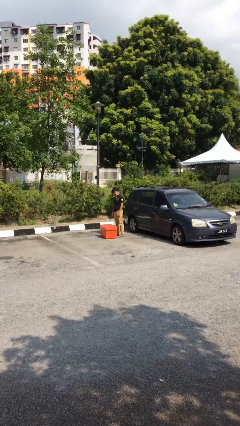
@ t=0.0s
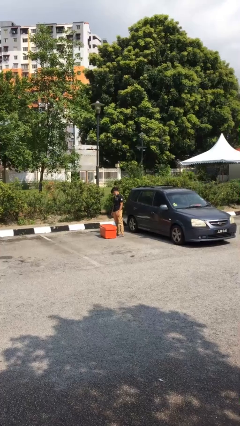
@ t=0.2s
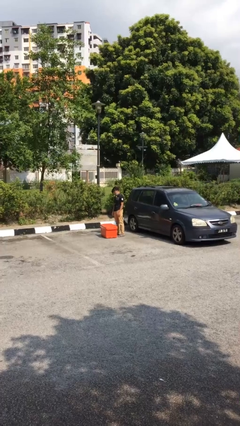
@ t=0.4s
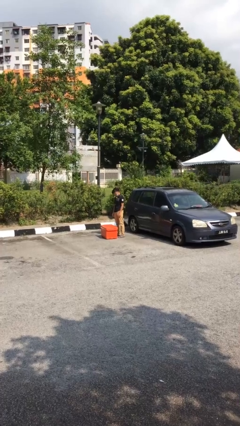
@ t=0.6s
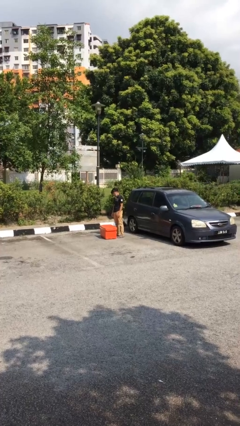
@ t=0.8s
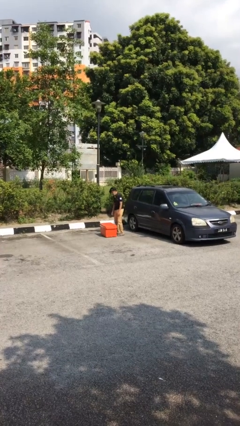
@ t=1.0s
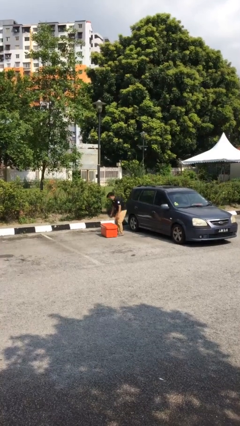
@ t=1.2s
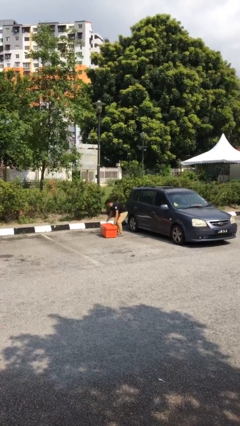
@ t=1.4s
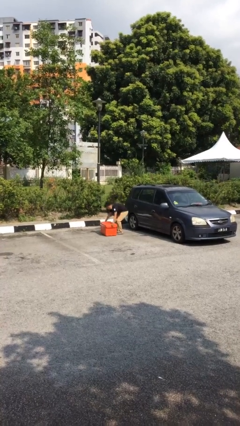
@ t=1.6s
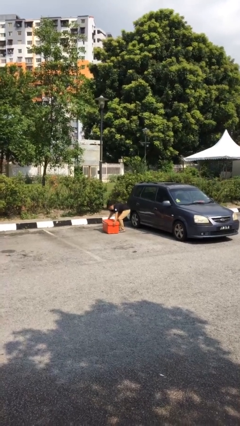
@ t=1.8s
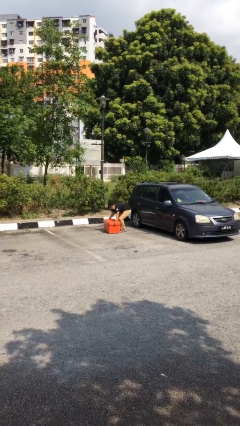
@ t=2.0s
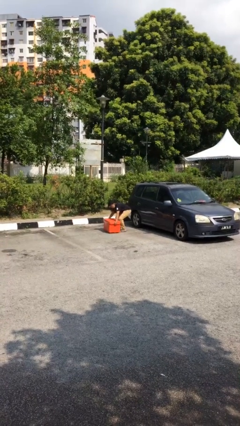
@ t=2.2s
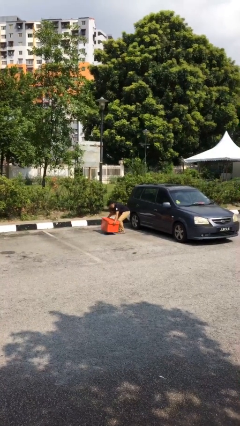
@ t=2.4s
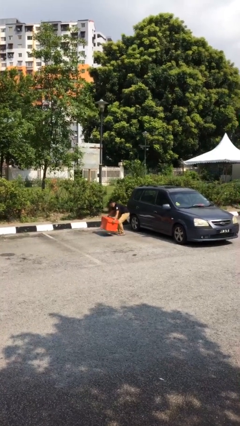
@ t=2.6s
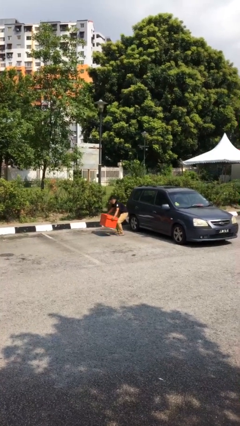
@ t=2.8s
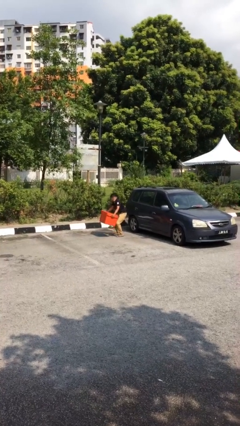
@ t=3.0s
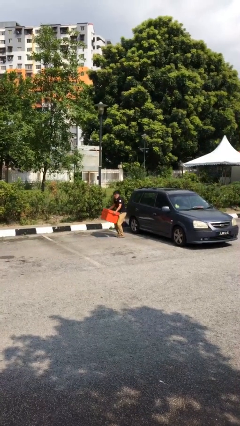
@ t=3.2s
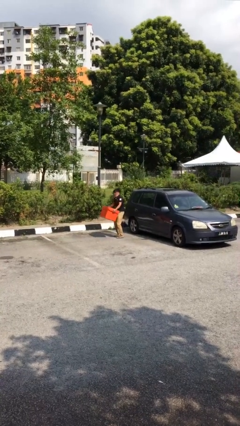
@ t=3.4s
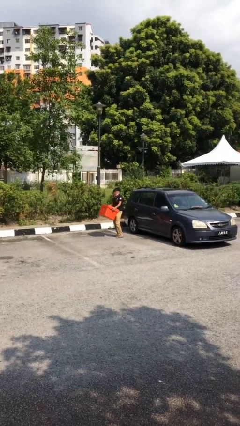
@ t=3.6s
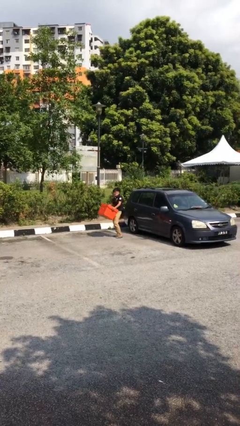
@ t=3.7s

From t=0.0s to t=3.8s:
person picks up object from floor

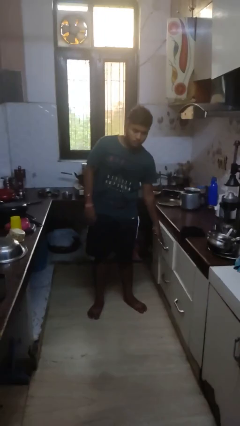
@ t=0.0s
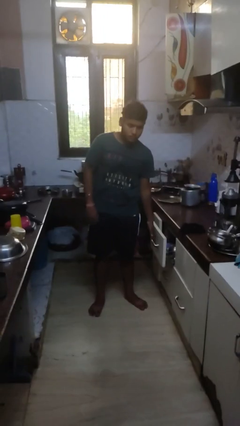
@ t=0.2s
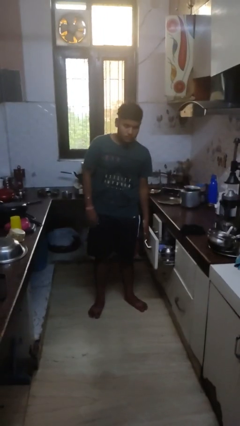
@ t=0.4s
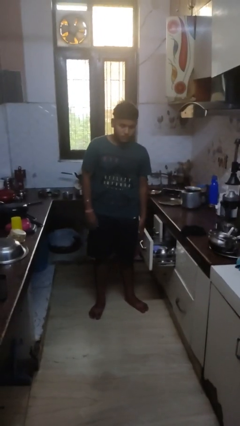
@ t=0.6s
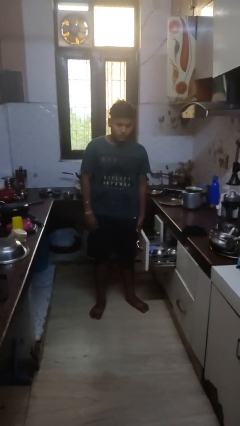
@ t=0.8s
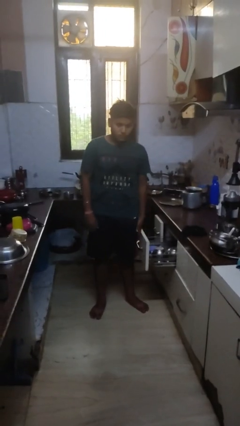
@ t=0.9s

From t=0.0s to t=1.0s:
person opens kitchen drawer

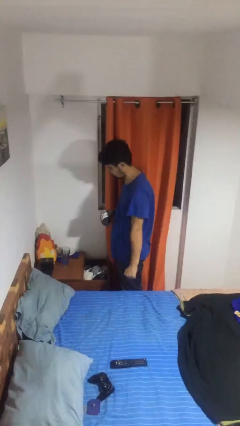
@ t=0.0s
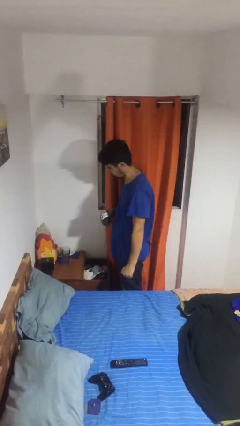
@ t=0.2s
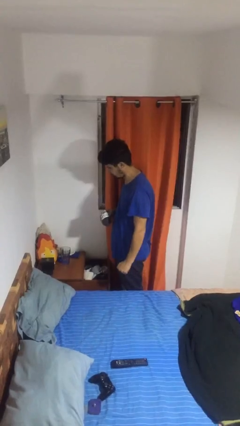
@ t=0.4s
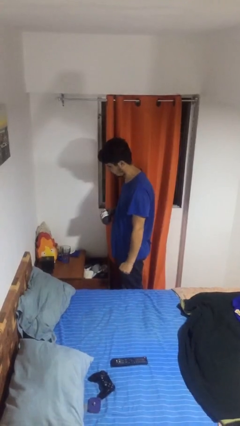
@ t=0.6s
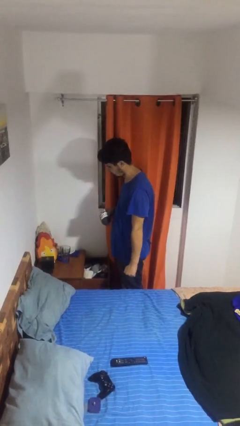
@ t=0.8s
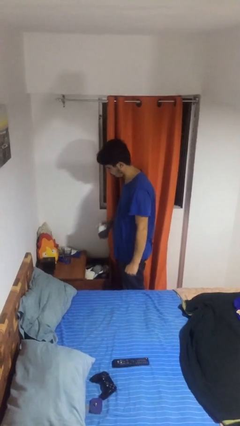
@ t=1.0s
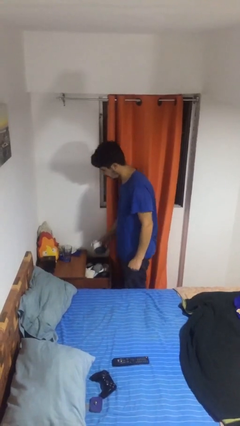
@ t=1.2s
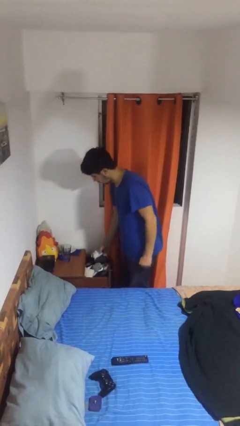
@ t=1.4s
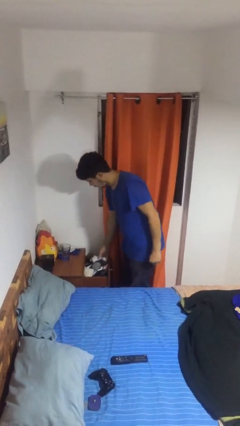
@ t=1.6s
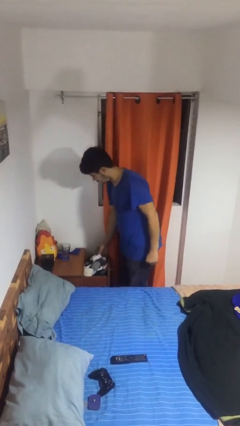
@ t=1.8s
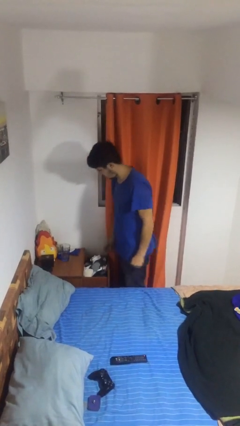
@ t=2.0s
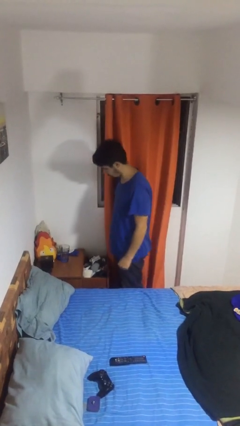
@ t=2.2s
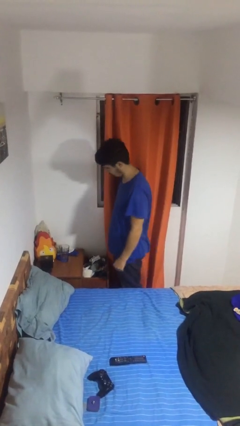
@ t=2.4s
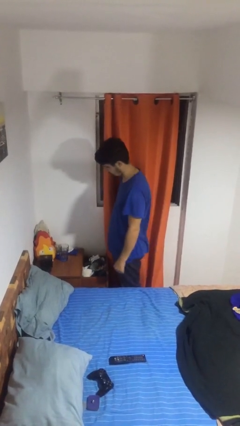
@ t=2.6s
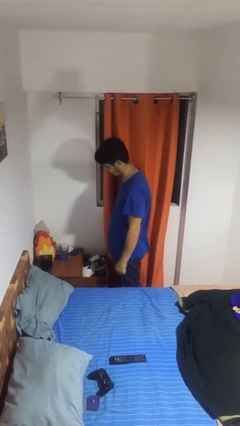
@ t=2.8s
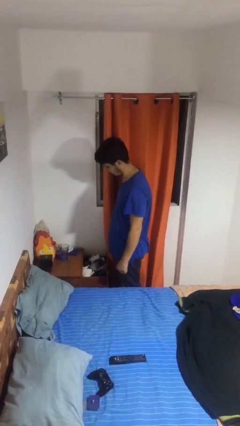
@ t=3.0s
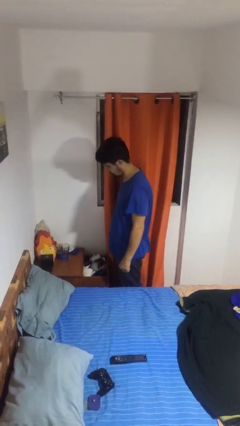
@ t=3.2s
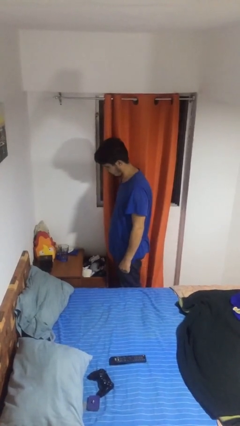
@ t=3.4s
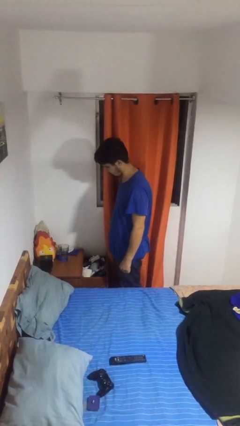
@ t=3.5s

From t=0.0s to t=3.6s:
person puts clothes into dresser

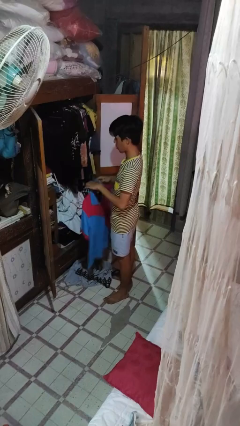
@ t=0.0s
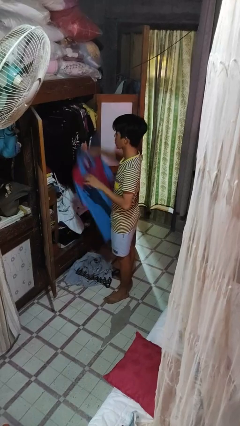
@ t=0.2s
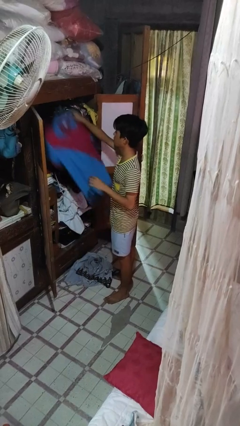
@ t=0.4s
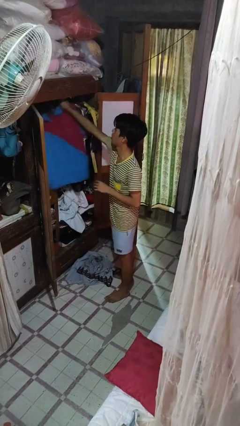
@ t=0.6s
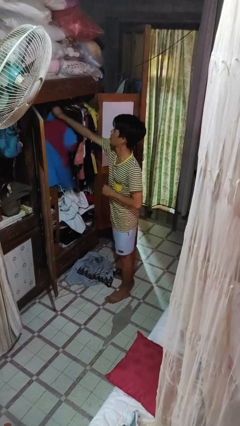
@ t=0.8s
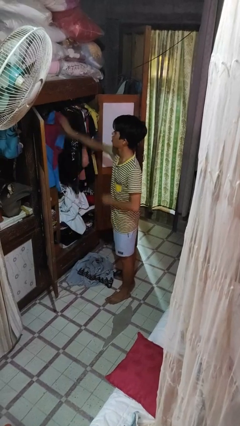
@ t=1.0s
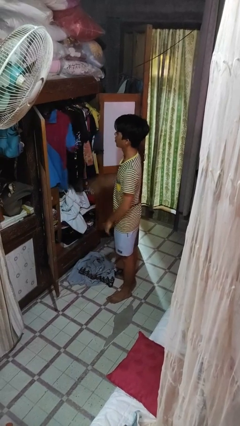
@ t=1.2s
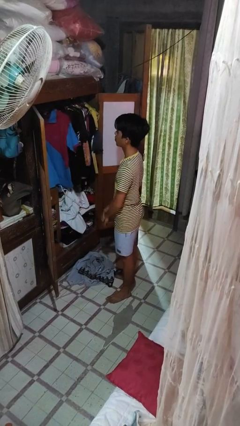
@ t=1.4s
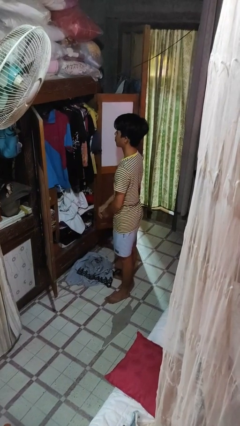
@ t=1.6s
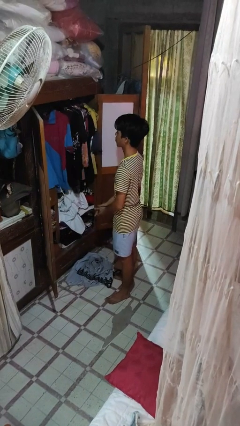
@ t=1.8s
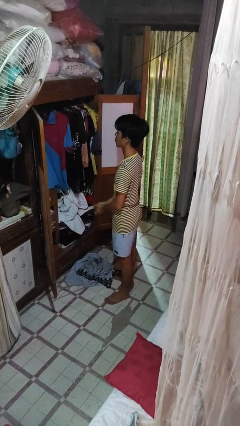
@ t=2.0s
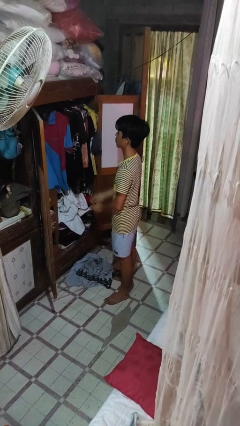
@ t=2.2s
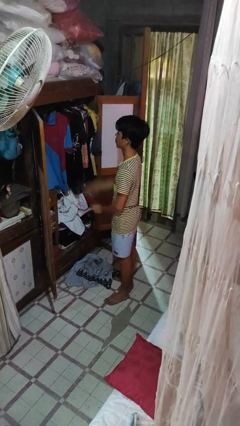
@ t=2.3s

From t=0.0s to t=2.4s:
person puts clothes into closet

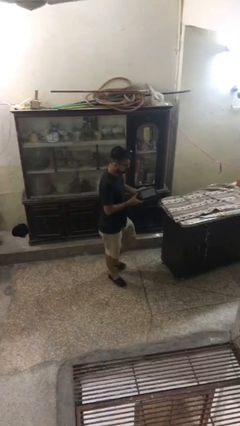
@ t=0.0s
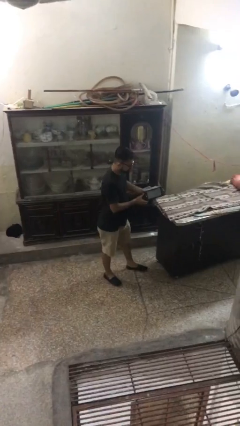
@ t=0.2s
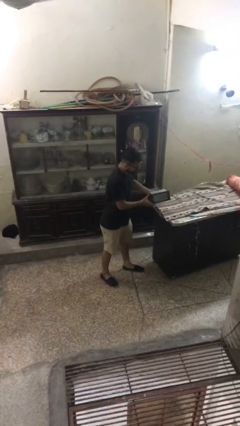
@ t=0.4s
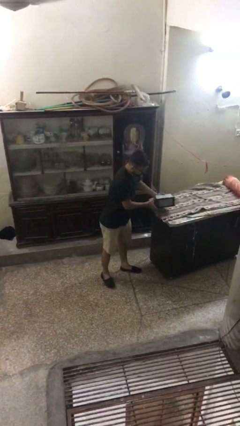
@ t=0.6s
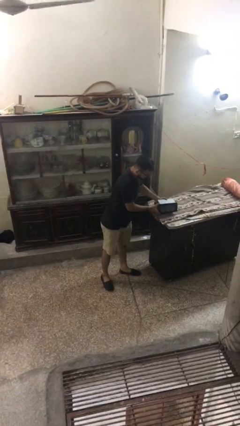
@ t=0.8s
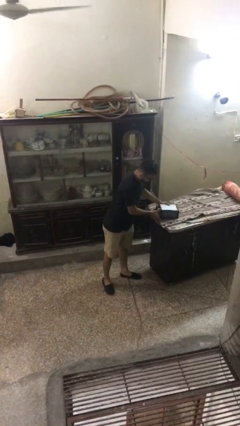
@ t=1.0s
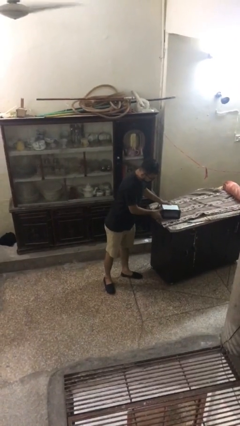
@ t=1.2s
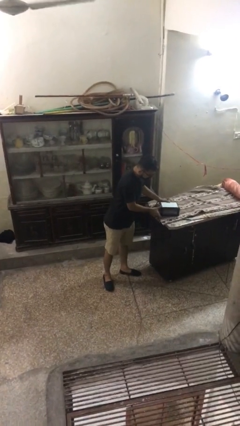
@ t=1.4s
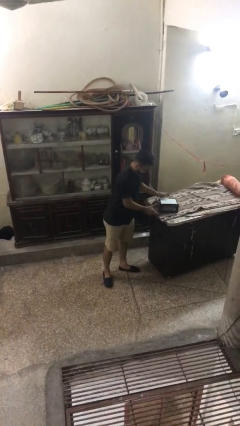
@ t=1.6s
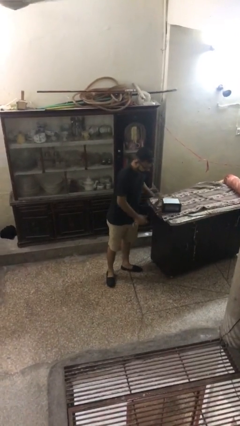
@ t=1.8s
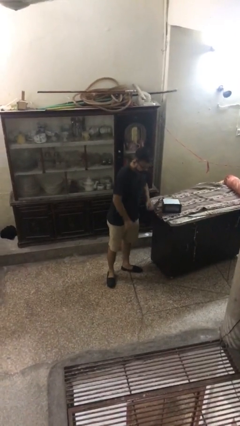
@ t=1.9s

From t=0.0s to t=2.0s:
person puts down object on table

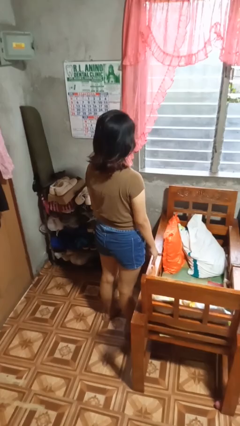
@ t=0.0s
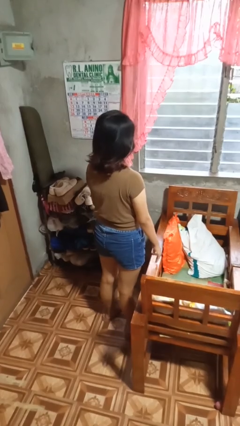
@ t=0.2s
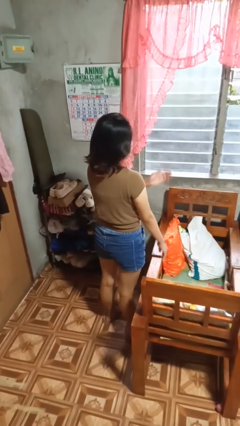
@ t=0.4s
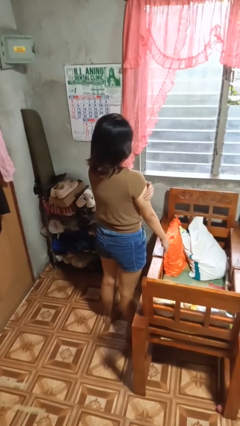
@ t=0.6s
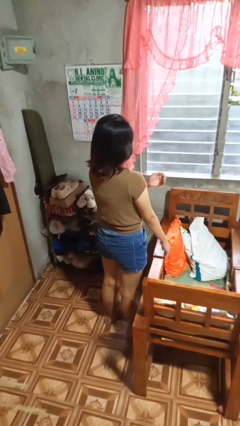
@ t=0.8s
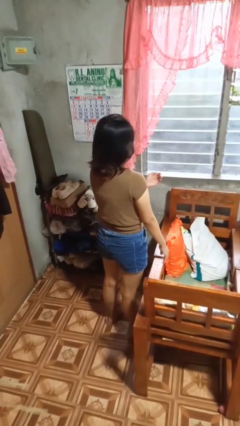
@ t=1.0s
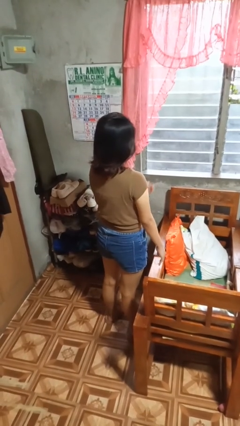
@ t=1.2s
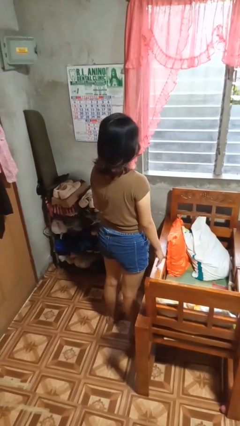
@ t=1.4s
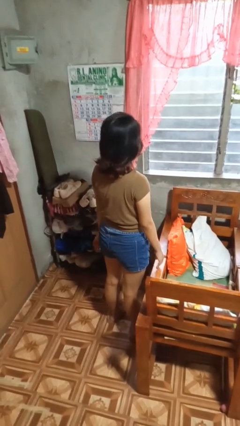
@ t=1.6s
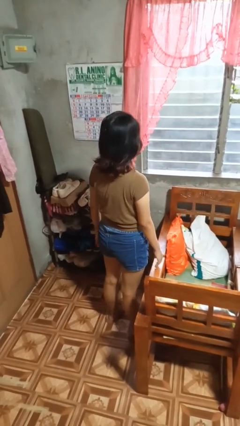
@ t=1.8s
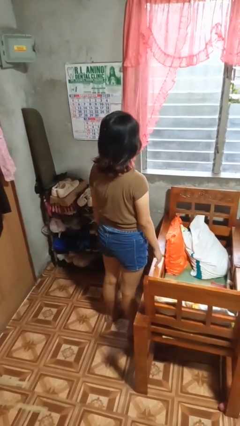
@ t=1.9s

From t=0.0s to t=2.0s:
person swats bug

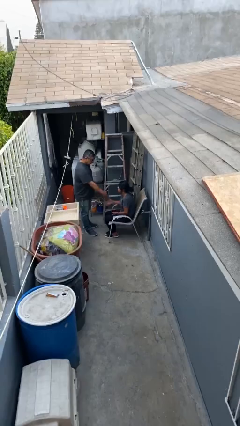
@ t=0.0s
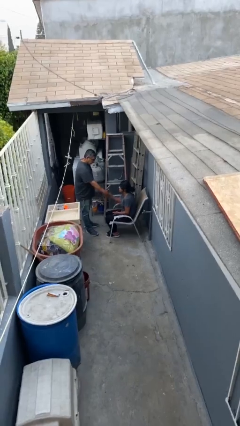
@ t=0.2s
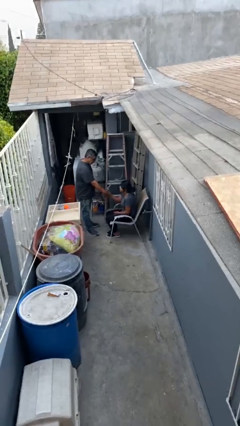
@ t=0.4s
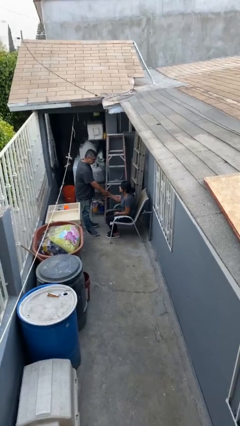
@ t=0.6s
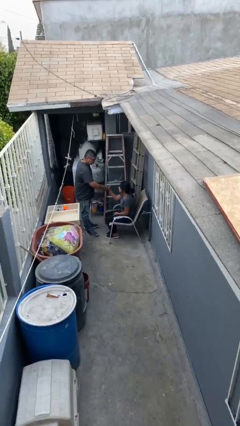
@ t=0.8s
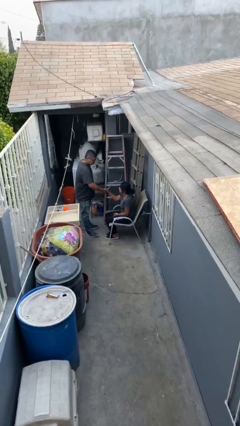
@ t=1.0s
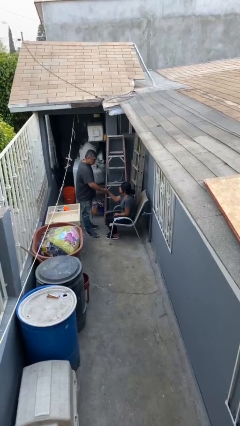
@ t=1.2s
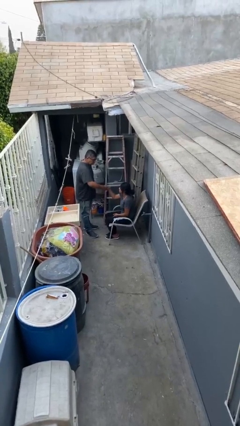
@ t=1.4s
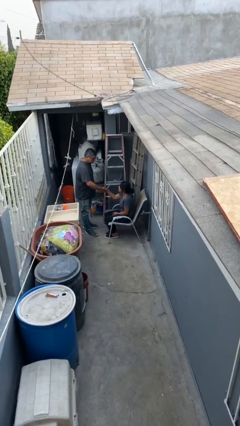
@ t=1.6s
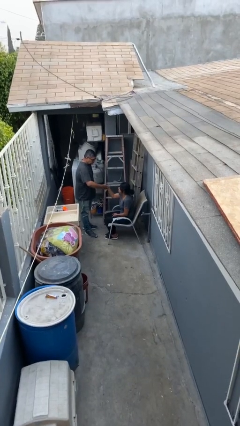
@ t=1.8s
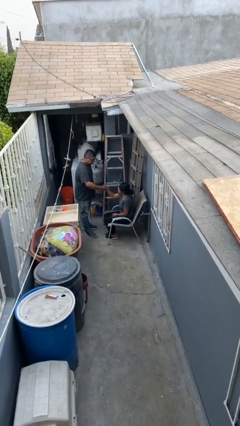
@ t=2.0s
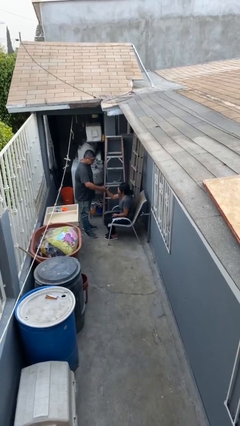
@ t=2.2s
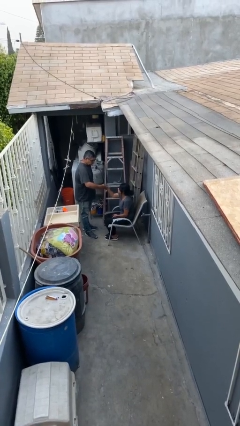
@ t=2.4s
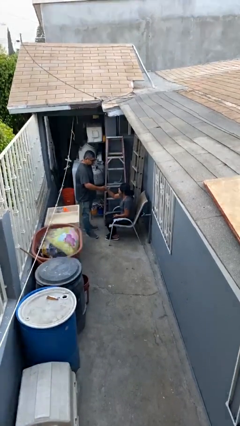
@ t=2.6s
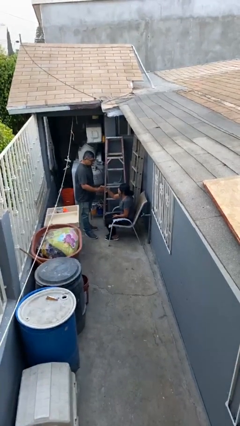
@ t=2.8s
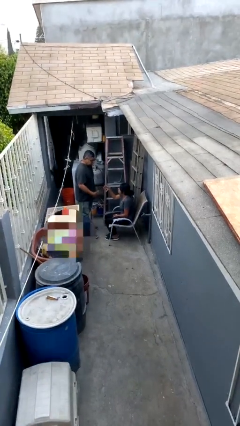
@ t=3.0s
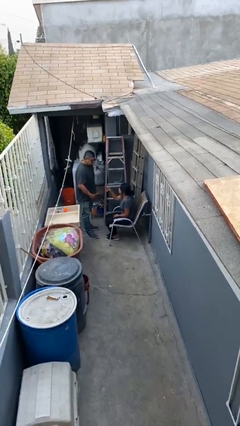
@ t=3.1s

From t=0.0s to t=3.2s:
person shakes hand
